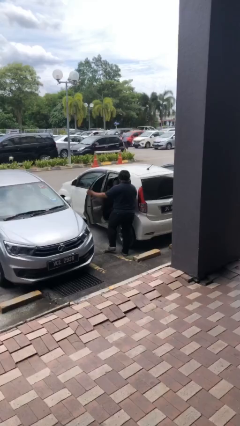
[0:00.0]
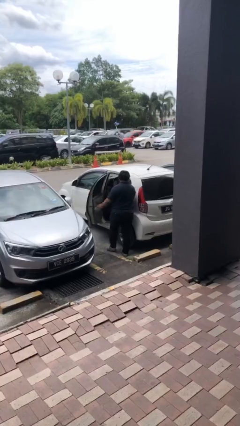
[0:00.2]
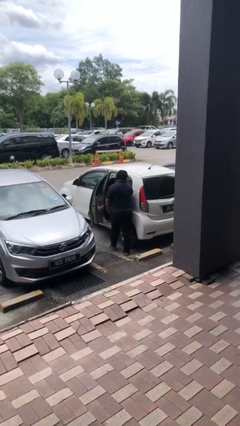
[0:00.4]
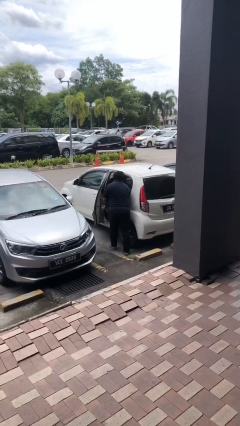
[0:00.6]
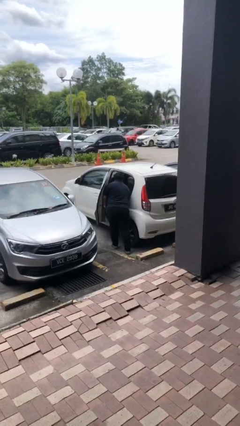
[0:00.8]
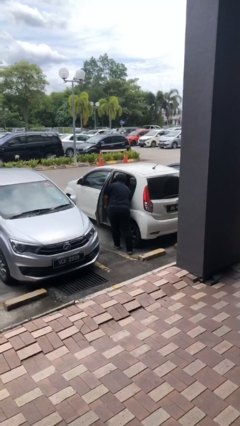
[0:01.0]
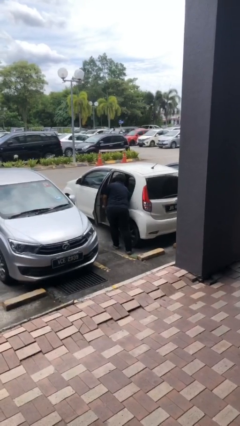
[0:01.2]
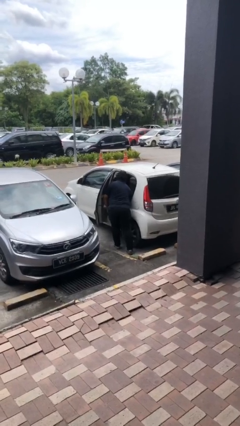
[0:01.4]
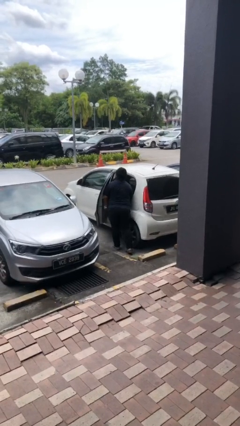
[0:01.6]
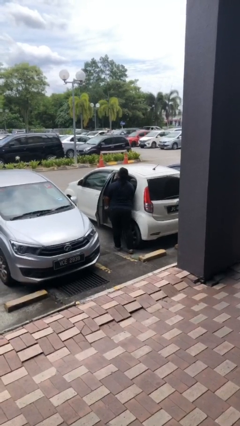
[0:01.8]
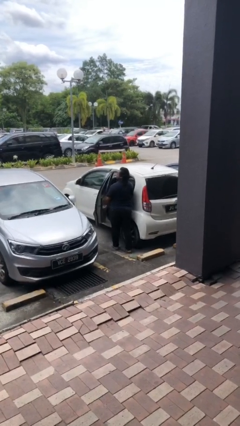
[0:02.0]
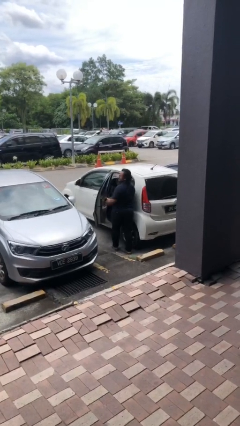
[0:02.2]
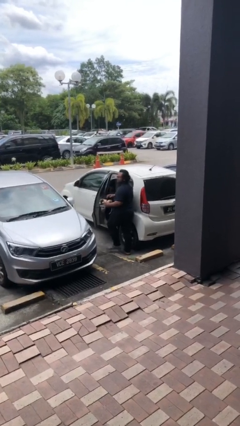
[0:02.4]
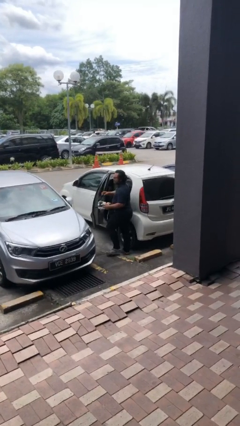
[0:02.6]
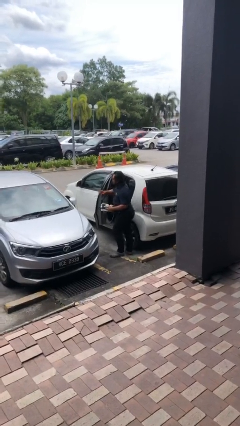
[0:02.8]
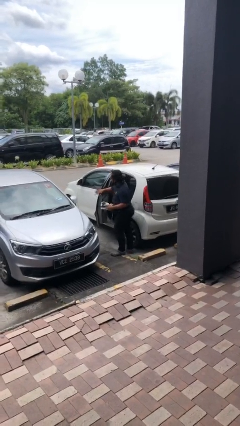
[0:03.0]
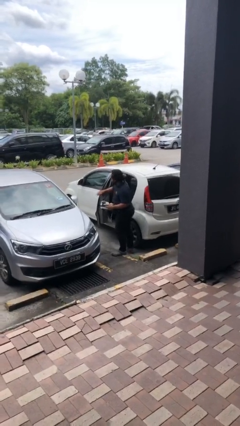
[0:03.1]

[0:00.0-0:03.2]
person unloads car

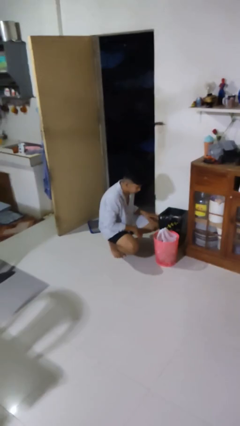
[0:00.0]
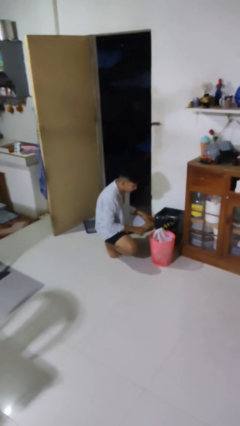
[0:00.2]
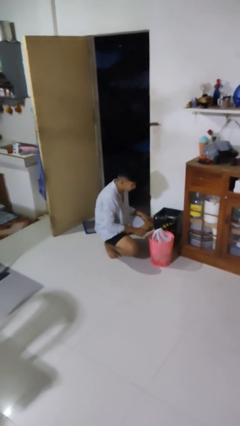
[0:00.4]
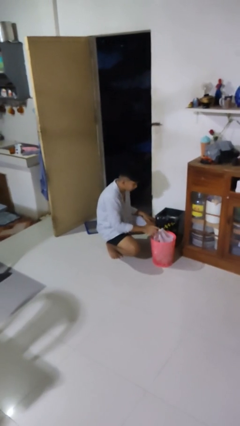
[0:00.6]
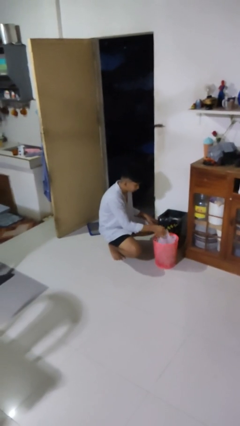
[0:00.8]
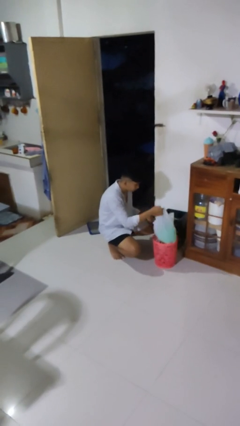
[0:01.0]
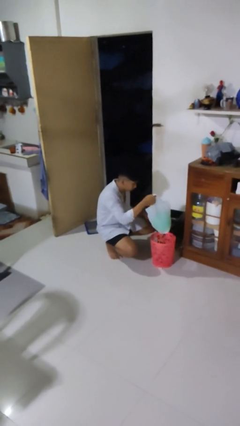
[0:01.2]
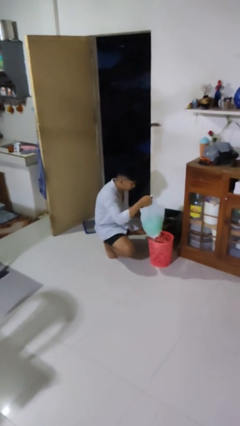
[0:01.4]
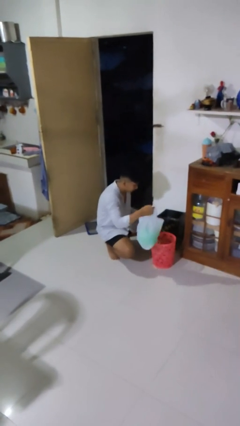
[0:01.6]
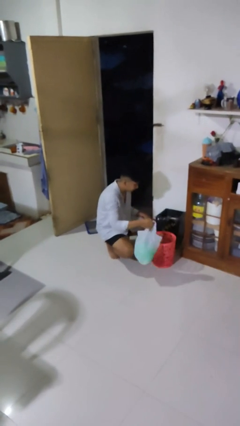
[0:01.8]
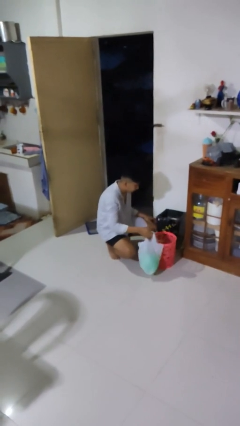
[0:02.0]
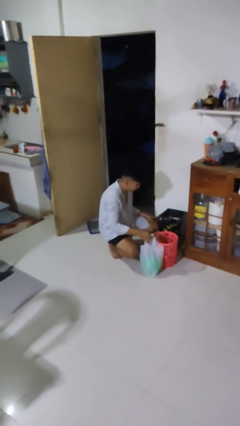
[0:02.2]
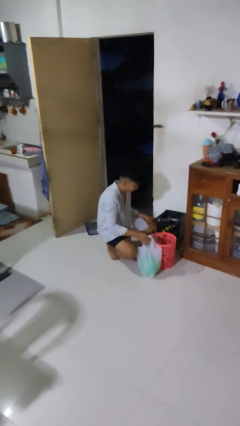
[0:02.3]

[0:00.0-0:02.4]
person removes trashbag from trashcan

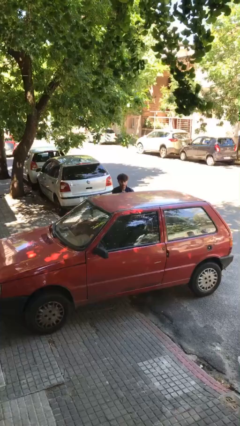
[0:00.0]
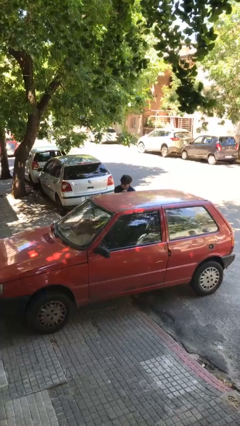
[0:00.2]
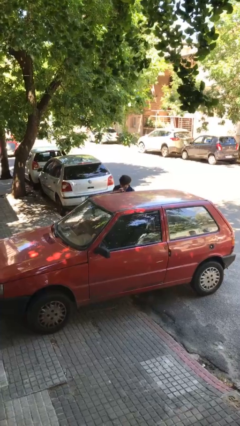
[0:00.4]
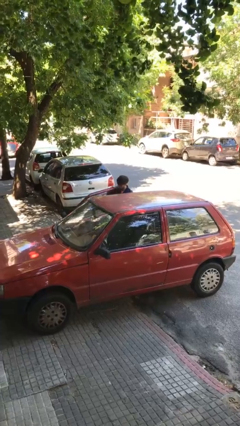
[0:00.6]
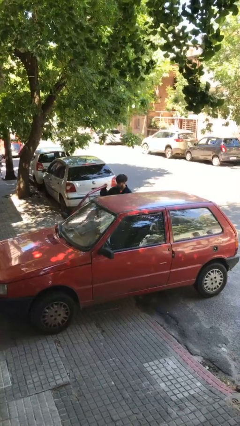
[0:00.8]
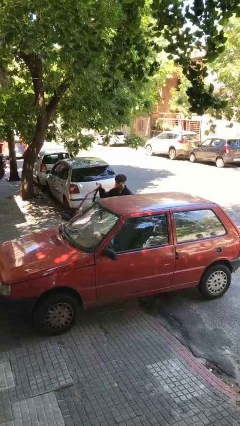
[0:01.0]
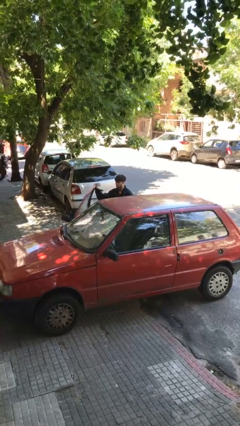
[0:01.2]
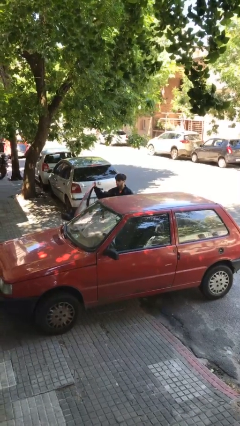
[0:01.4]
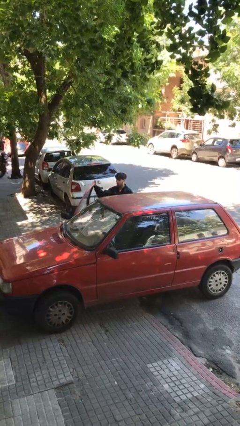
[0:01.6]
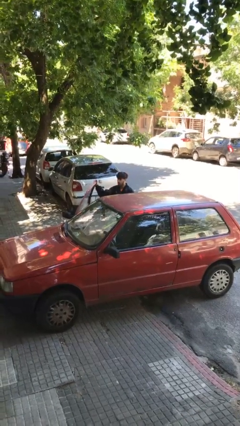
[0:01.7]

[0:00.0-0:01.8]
person opens car door

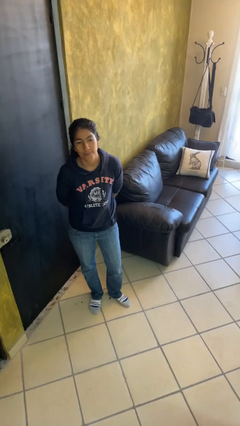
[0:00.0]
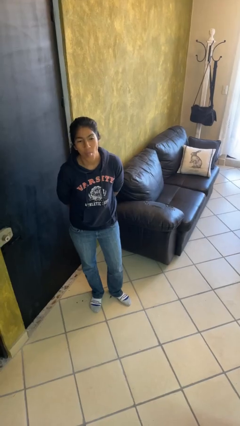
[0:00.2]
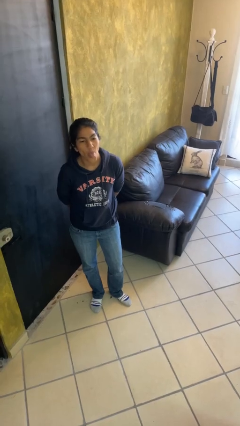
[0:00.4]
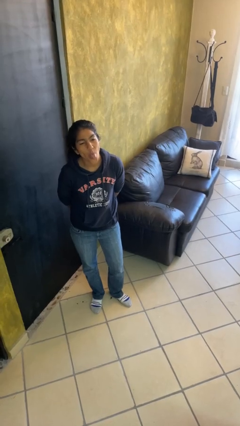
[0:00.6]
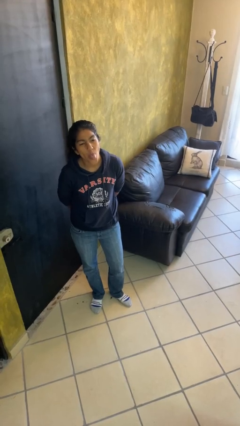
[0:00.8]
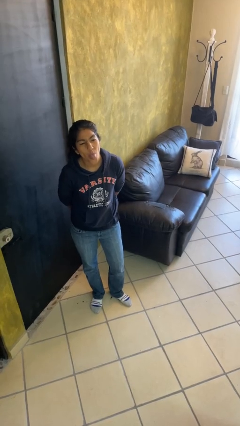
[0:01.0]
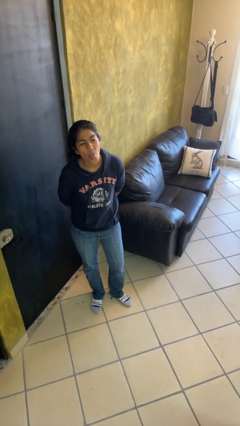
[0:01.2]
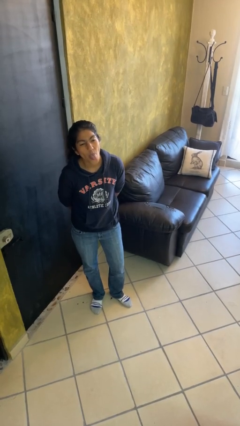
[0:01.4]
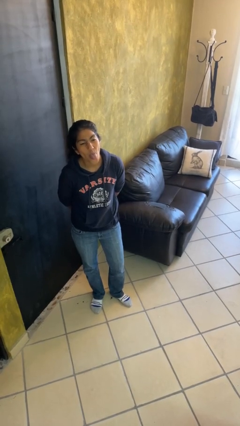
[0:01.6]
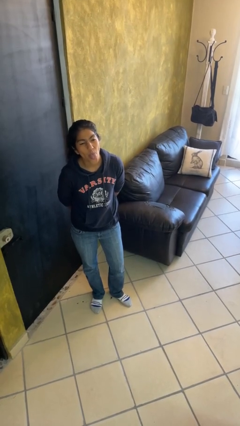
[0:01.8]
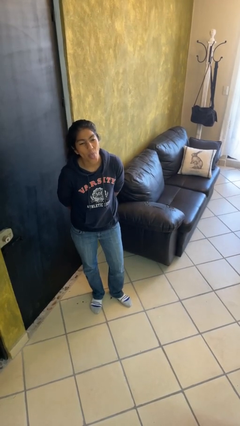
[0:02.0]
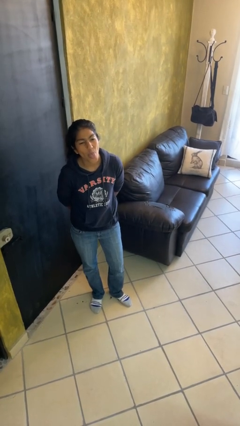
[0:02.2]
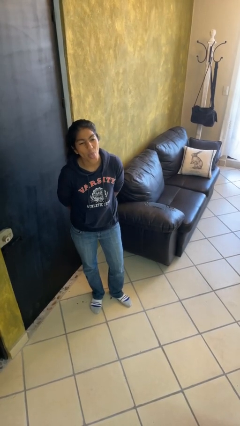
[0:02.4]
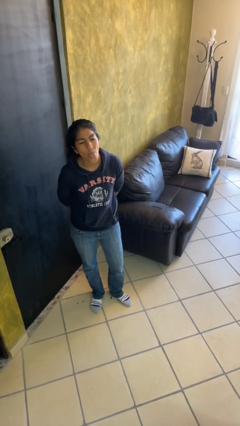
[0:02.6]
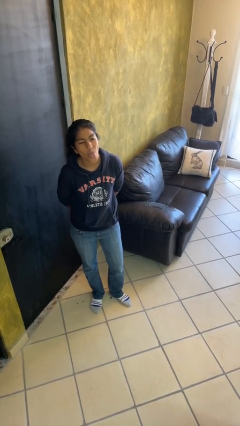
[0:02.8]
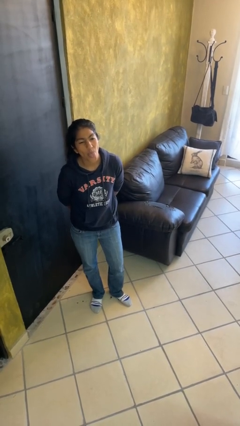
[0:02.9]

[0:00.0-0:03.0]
person sticks out tongue

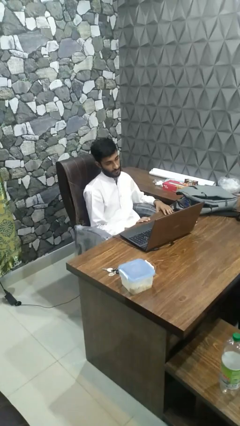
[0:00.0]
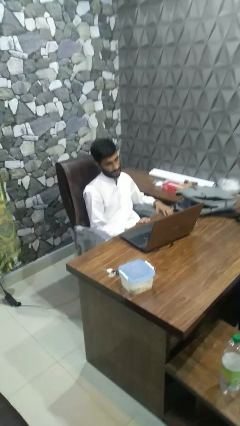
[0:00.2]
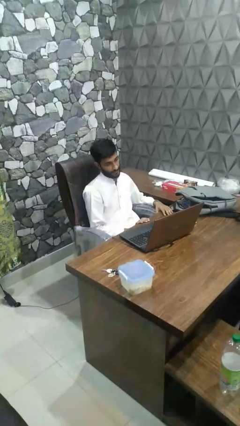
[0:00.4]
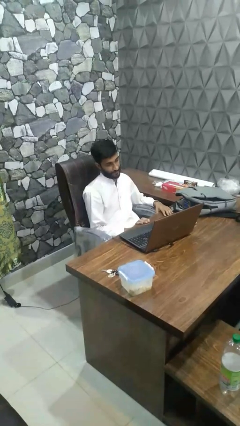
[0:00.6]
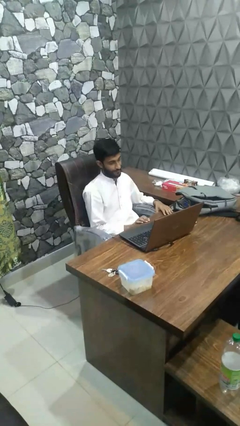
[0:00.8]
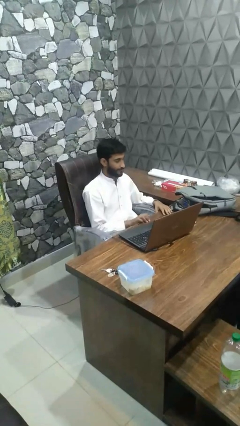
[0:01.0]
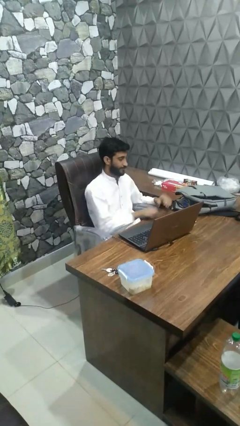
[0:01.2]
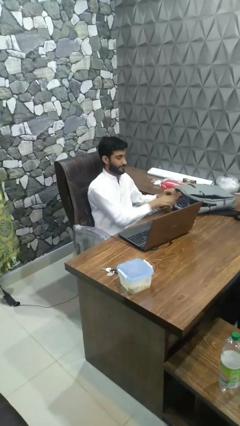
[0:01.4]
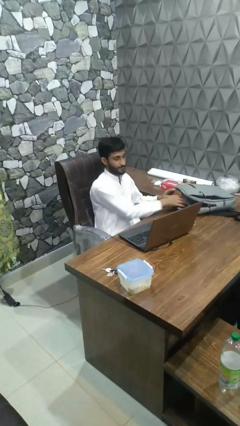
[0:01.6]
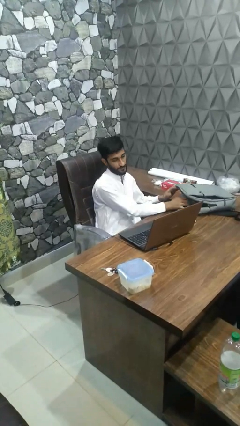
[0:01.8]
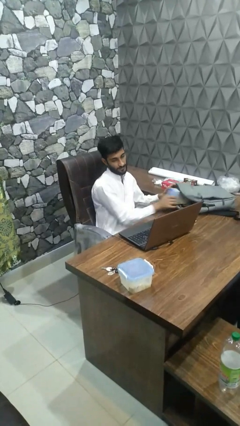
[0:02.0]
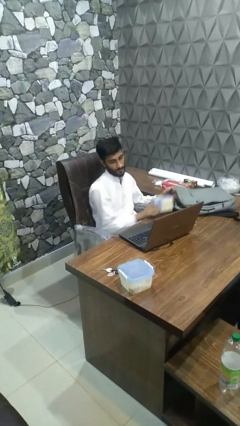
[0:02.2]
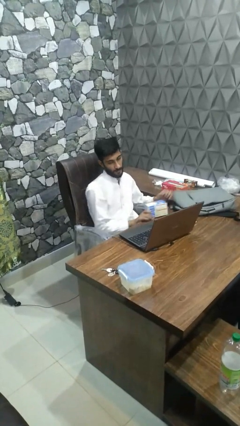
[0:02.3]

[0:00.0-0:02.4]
person takes object from bag

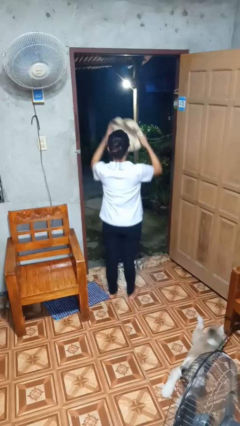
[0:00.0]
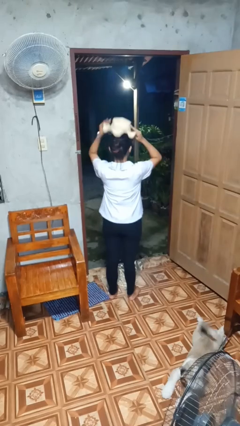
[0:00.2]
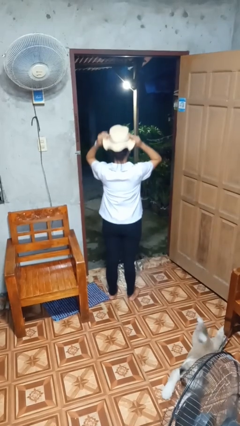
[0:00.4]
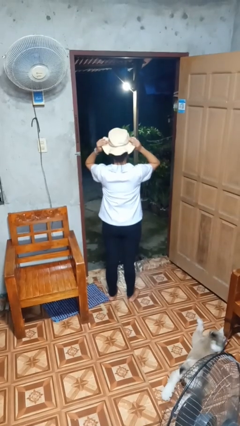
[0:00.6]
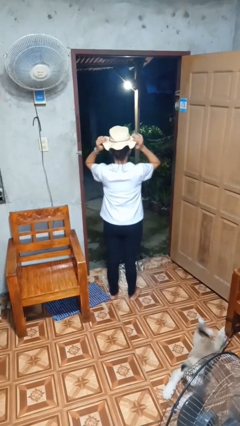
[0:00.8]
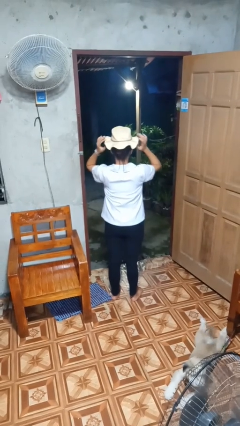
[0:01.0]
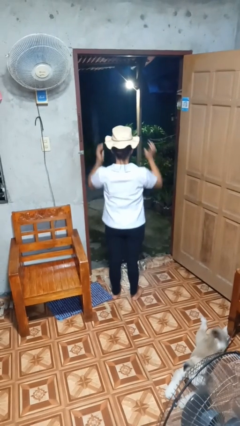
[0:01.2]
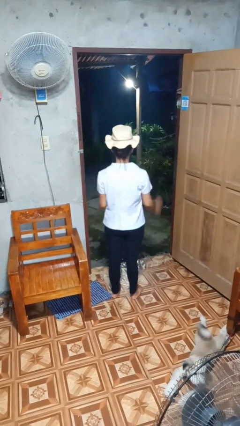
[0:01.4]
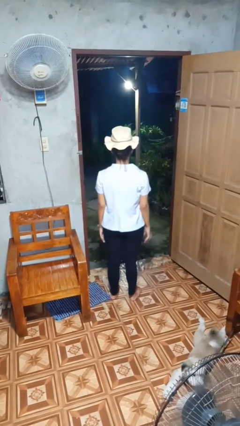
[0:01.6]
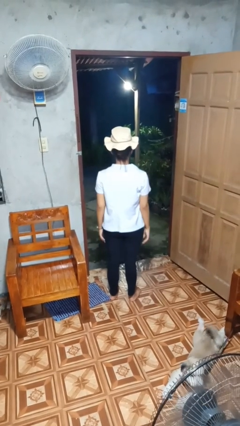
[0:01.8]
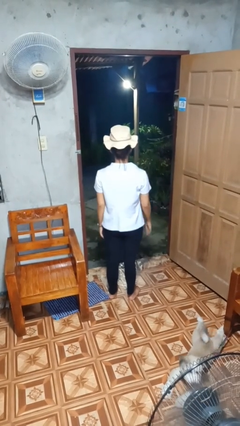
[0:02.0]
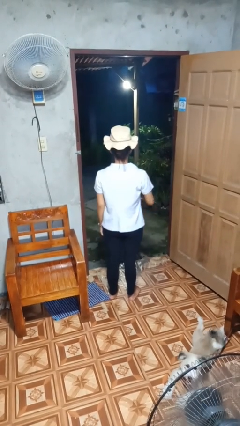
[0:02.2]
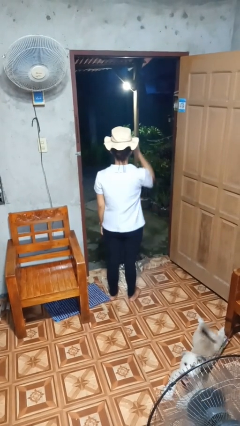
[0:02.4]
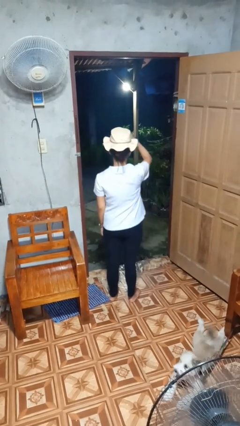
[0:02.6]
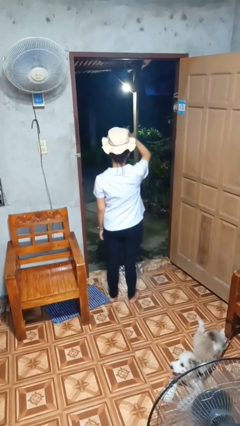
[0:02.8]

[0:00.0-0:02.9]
person puts on hat

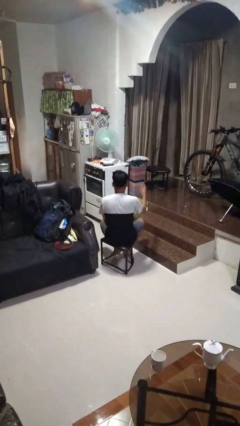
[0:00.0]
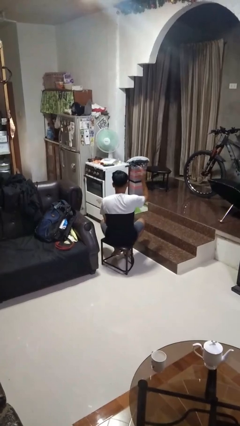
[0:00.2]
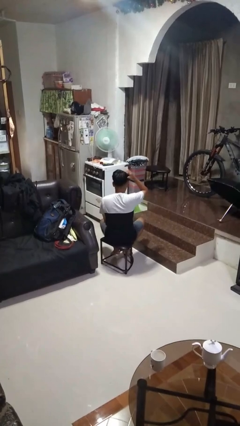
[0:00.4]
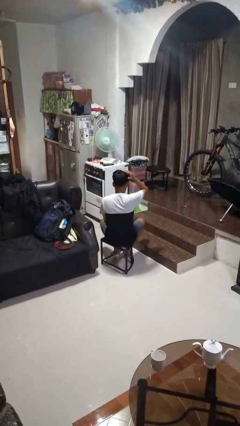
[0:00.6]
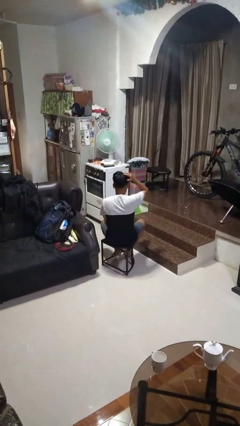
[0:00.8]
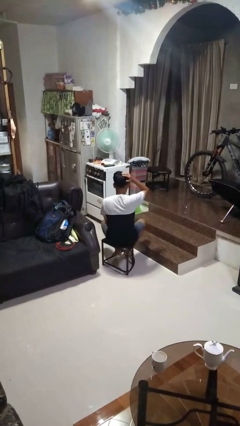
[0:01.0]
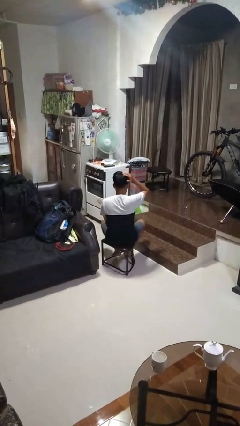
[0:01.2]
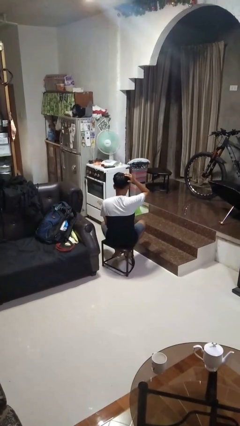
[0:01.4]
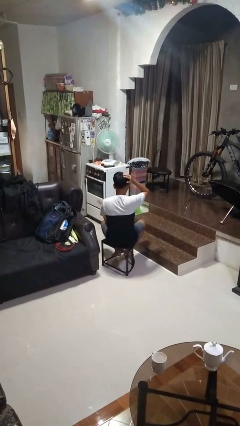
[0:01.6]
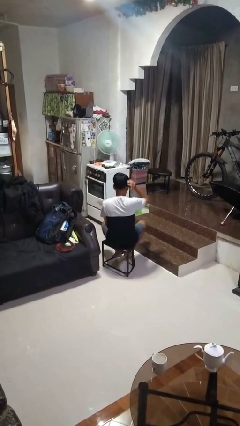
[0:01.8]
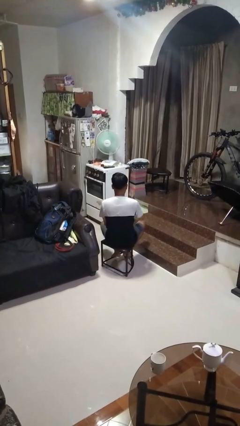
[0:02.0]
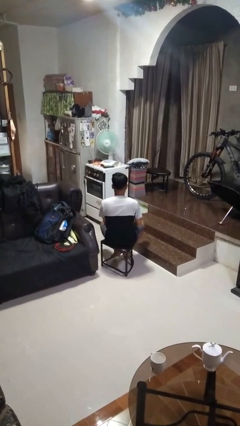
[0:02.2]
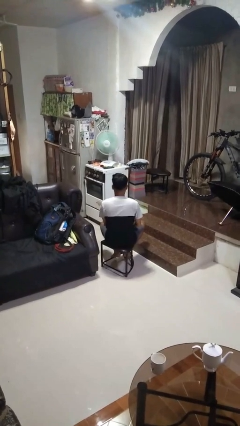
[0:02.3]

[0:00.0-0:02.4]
person pats head
